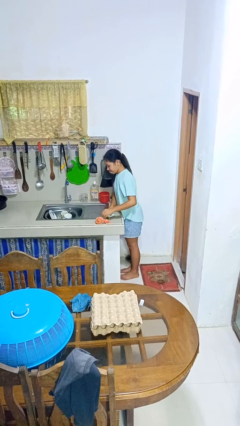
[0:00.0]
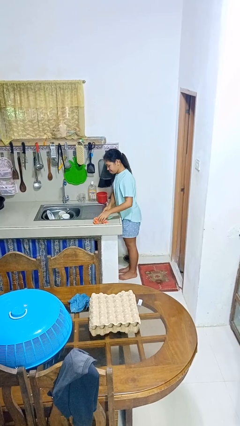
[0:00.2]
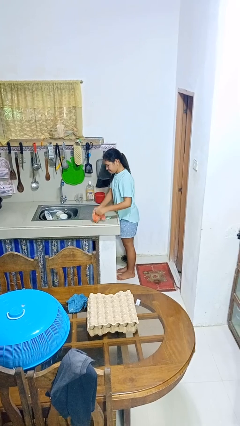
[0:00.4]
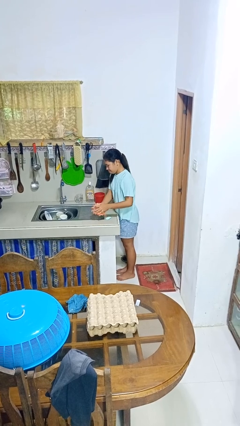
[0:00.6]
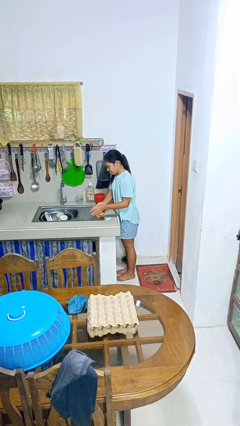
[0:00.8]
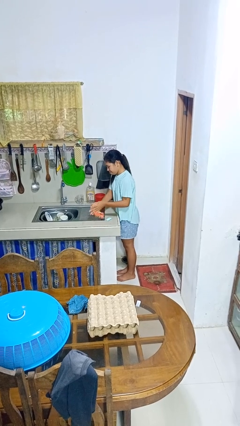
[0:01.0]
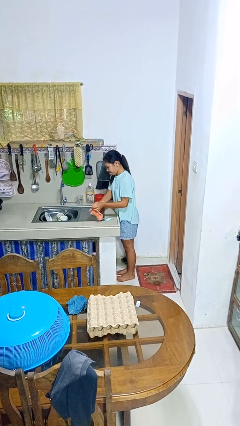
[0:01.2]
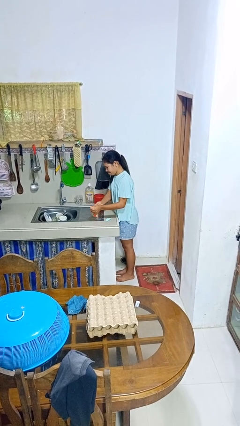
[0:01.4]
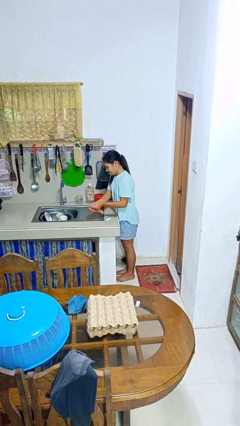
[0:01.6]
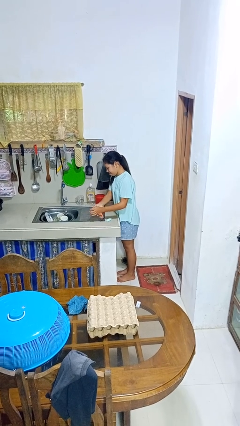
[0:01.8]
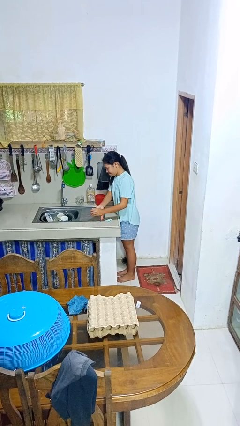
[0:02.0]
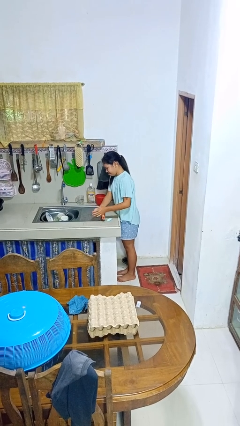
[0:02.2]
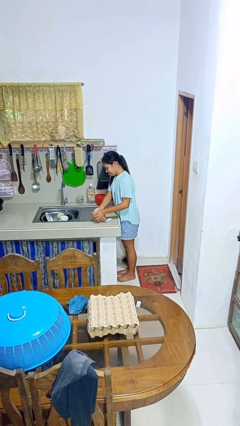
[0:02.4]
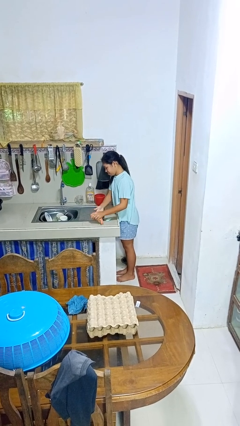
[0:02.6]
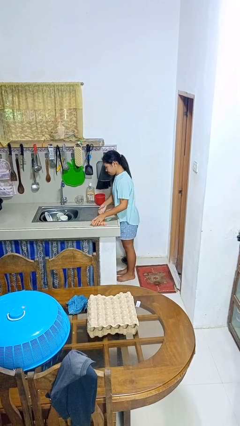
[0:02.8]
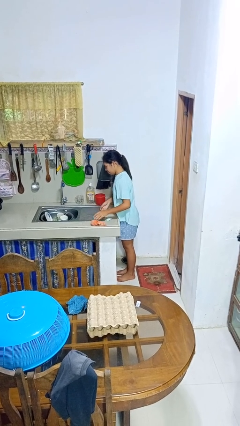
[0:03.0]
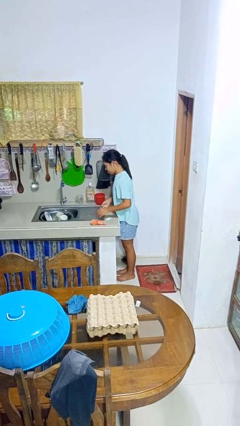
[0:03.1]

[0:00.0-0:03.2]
person dries hands with towel

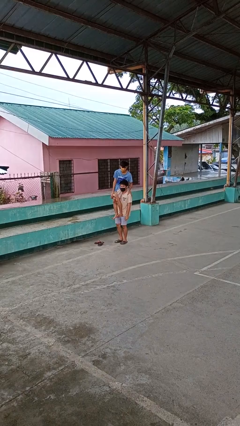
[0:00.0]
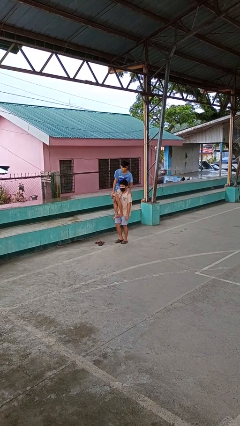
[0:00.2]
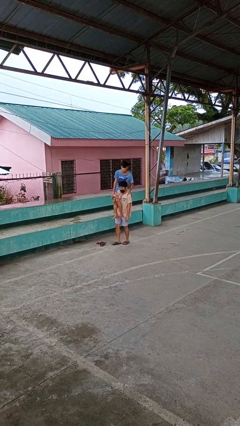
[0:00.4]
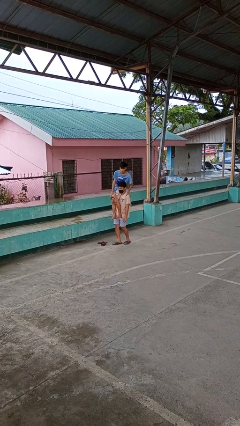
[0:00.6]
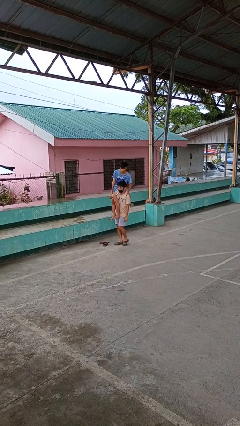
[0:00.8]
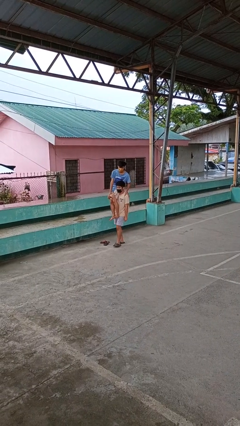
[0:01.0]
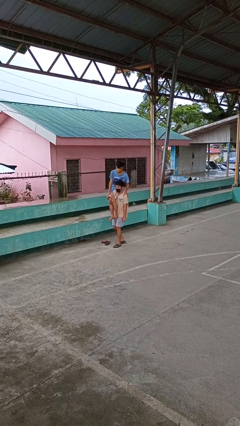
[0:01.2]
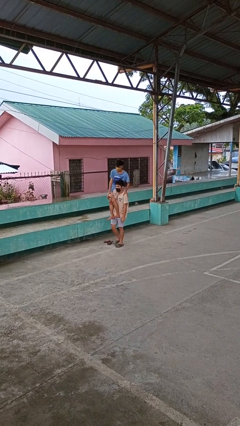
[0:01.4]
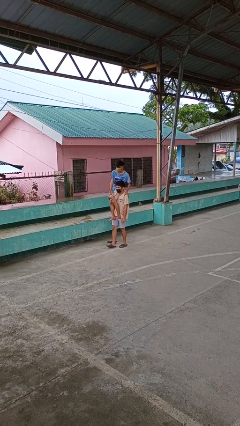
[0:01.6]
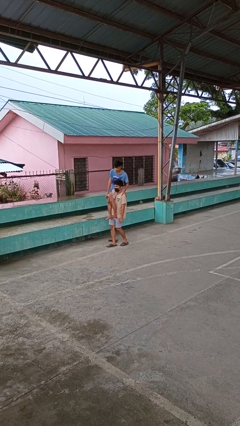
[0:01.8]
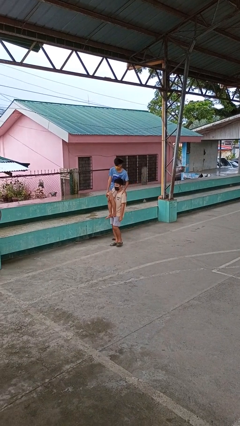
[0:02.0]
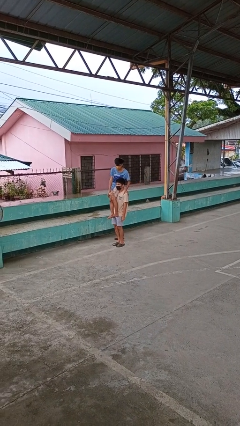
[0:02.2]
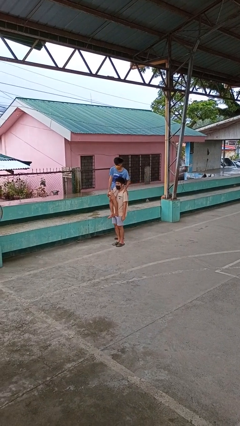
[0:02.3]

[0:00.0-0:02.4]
person carries person on shoulders

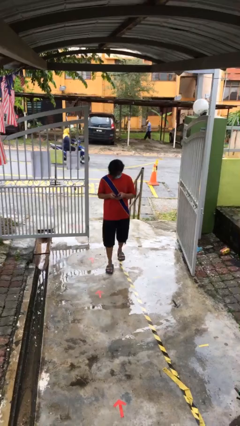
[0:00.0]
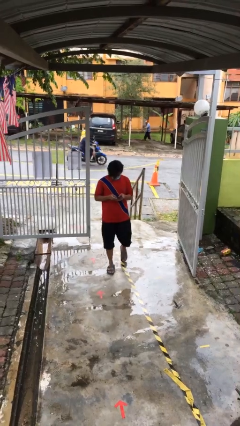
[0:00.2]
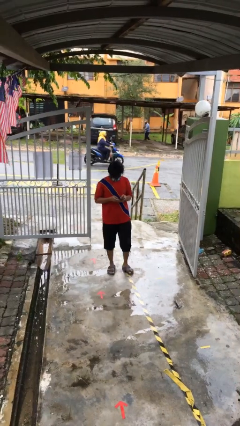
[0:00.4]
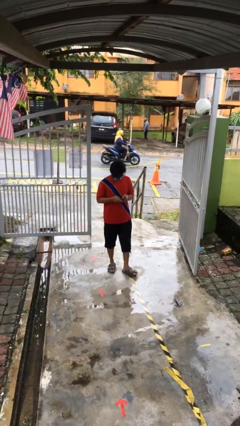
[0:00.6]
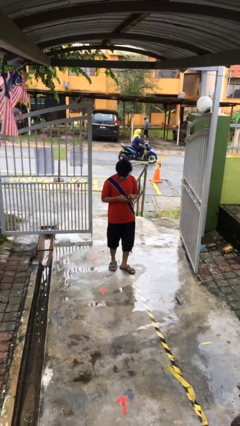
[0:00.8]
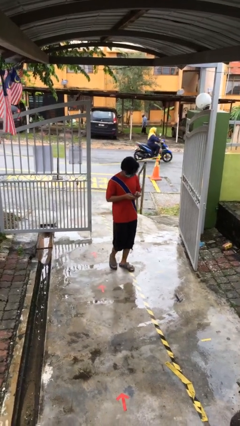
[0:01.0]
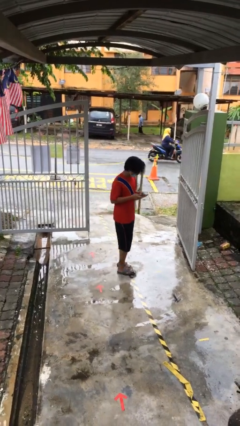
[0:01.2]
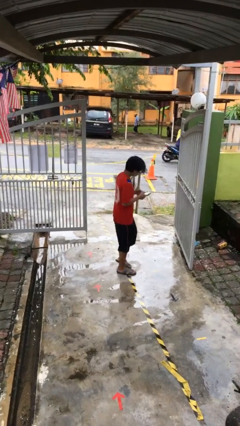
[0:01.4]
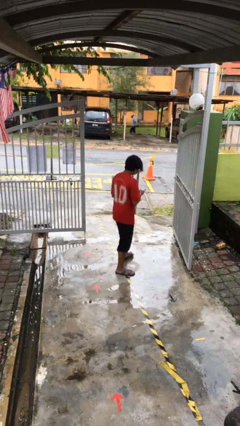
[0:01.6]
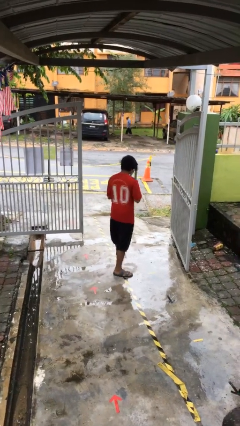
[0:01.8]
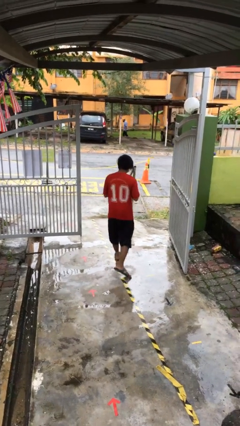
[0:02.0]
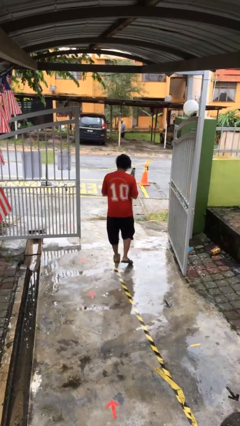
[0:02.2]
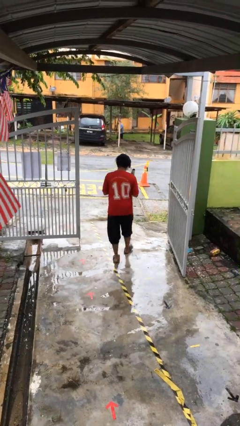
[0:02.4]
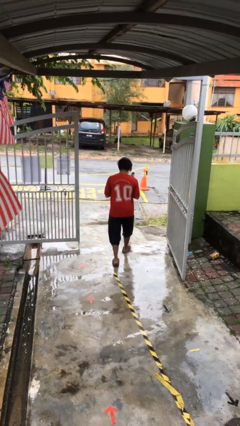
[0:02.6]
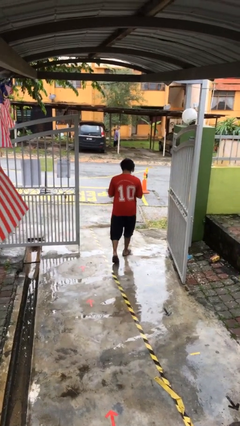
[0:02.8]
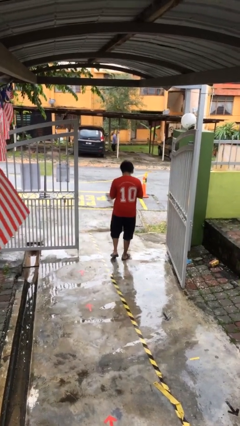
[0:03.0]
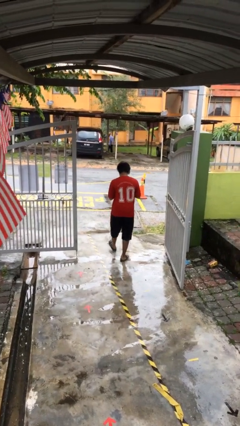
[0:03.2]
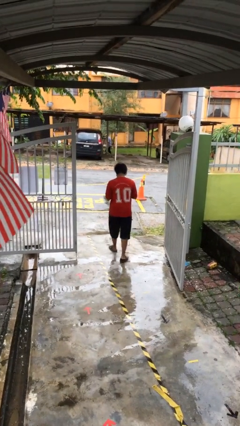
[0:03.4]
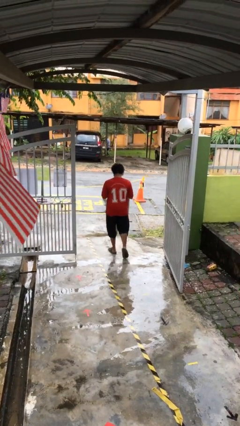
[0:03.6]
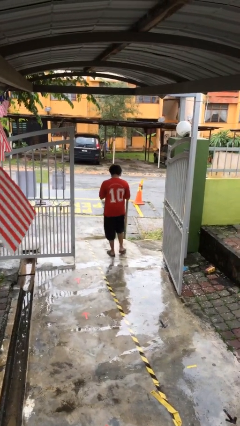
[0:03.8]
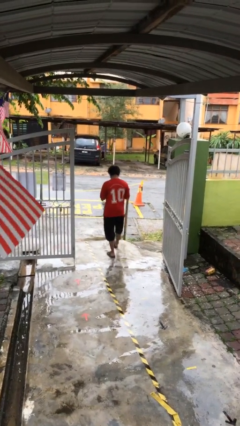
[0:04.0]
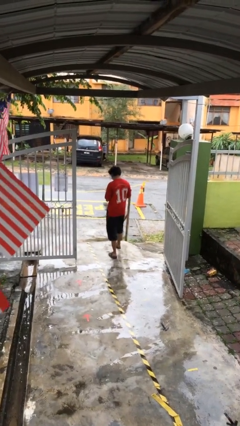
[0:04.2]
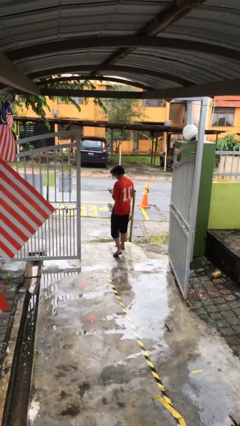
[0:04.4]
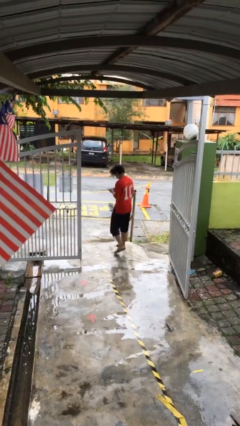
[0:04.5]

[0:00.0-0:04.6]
person exits scene through structure

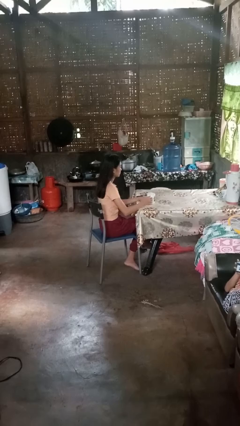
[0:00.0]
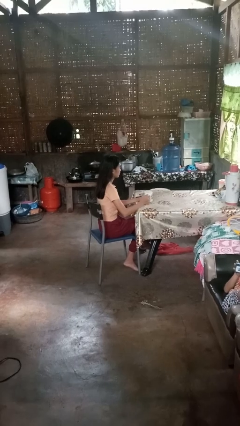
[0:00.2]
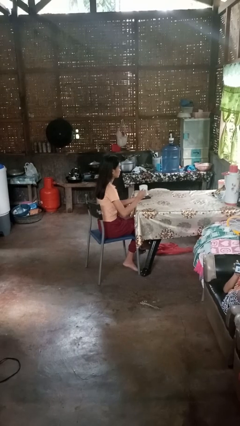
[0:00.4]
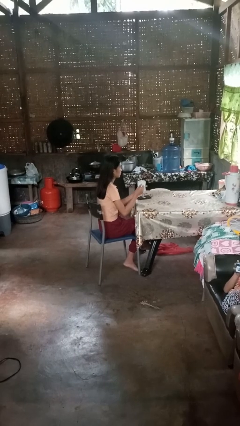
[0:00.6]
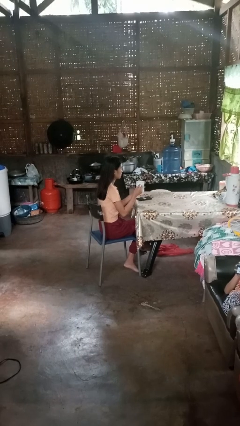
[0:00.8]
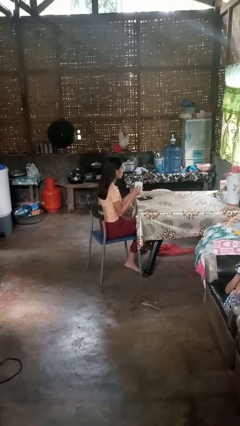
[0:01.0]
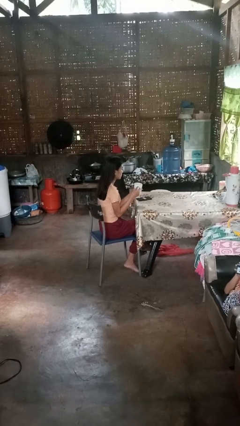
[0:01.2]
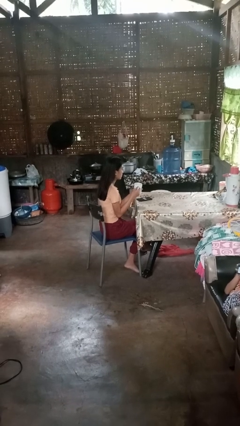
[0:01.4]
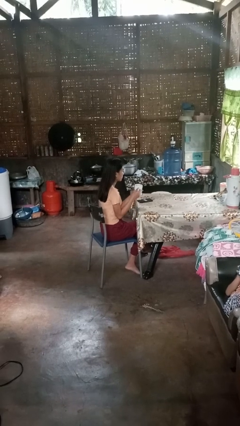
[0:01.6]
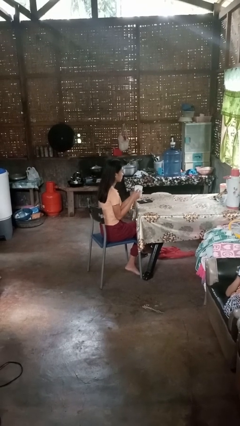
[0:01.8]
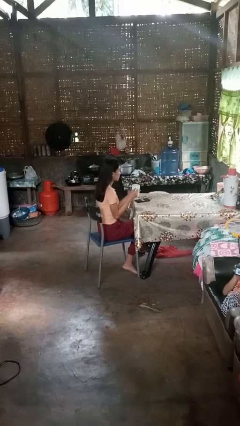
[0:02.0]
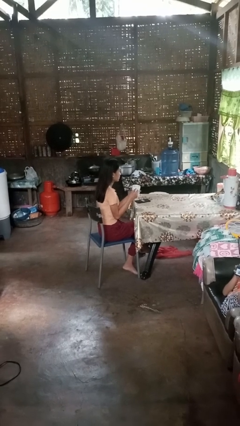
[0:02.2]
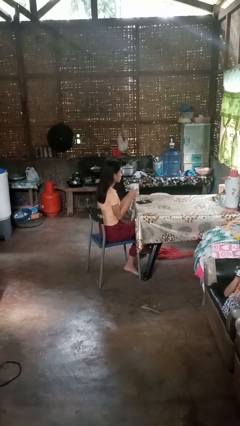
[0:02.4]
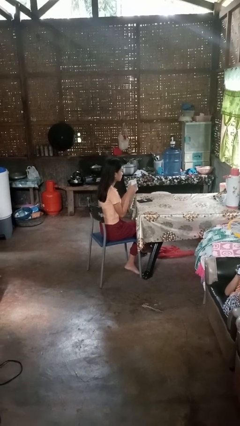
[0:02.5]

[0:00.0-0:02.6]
person picks up object from table

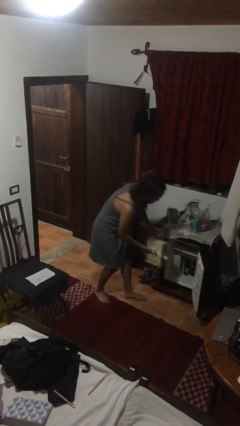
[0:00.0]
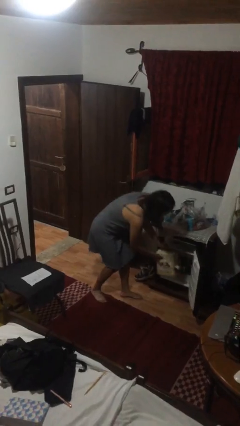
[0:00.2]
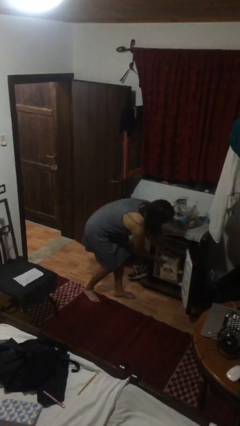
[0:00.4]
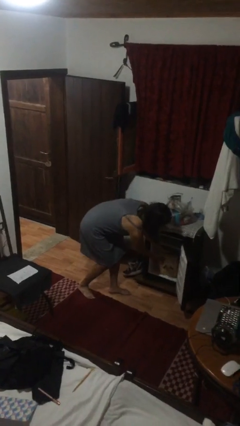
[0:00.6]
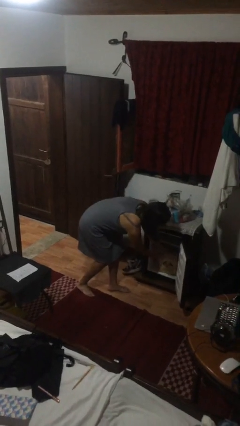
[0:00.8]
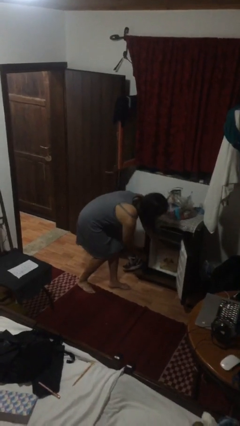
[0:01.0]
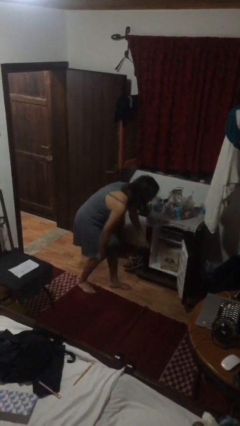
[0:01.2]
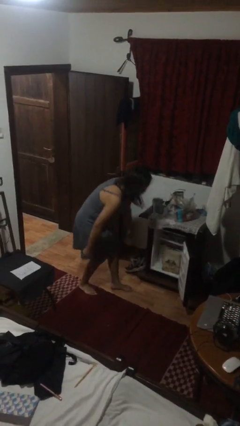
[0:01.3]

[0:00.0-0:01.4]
person puts down object into cabinet

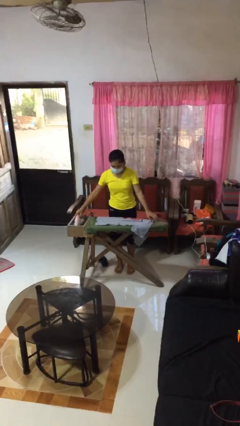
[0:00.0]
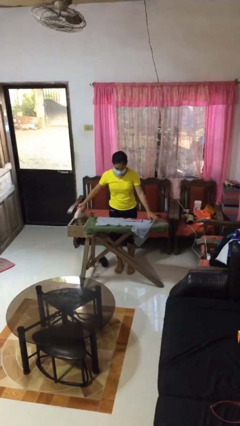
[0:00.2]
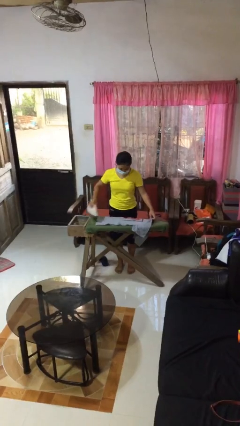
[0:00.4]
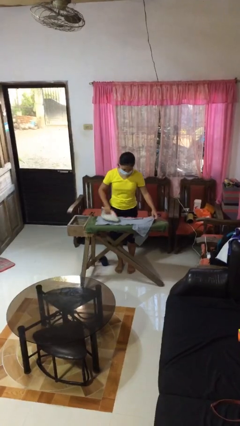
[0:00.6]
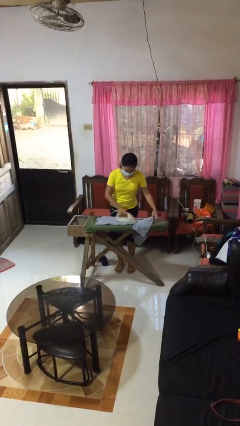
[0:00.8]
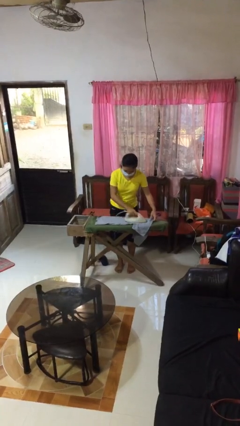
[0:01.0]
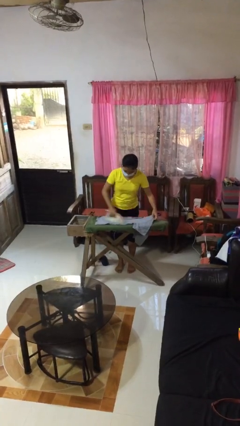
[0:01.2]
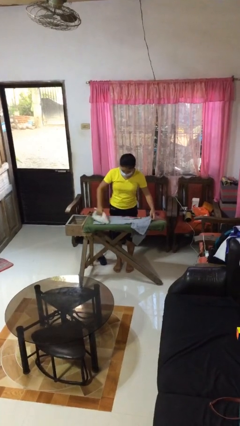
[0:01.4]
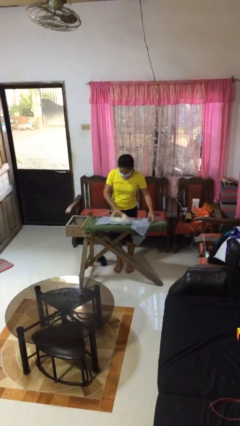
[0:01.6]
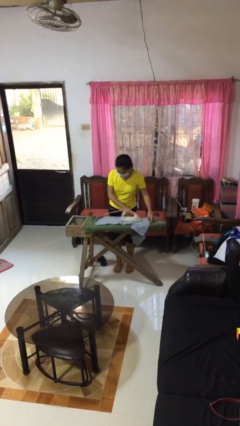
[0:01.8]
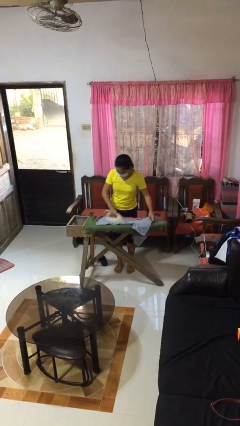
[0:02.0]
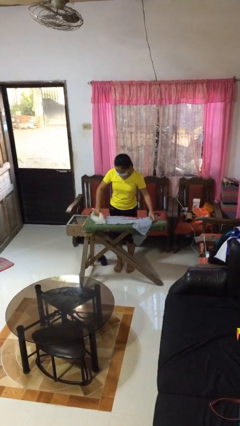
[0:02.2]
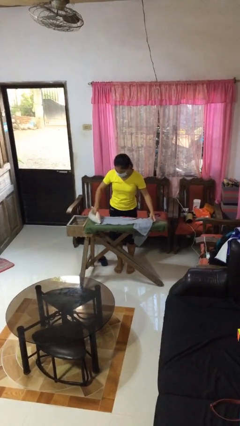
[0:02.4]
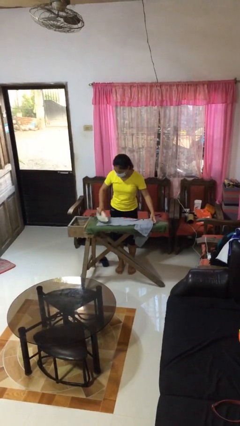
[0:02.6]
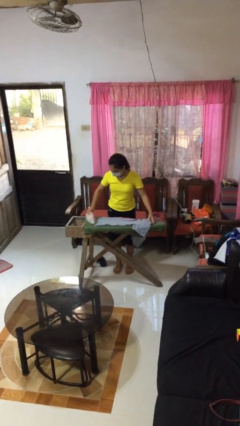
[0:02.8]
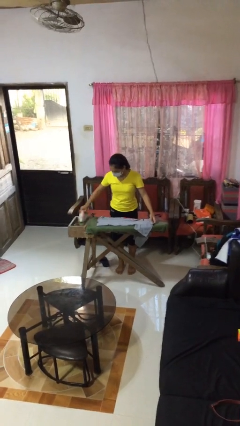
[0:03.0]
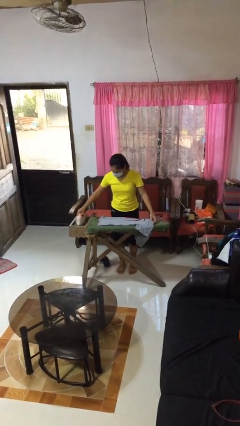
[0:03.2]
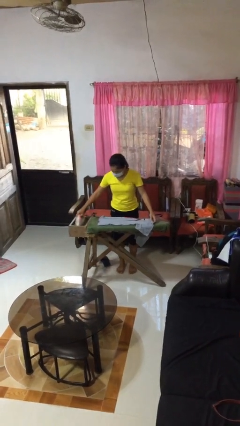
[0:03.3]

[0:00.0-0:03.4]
person irons clothes
